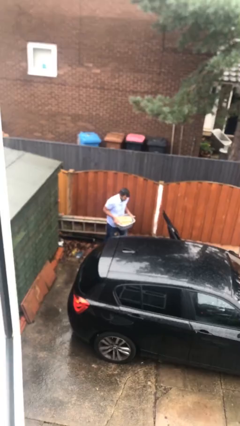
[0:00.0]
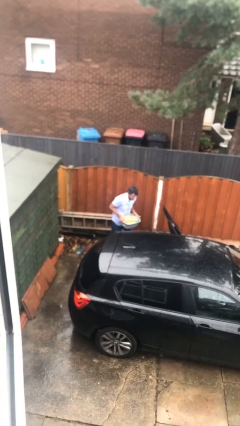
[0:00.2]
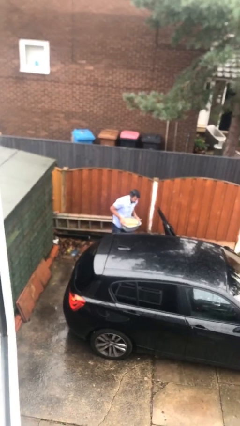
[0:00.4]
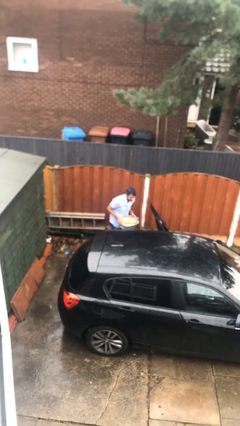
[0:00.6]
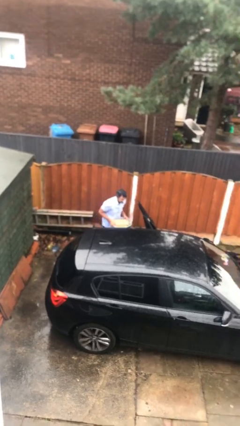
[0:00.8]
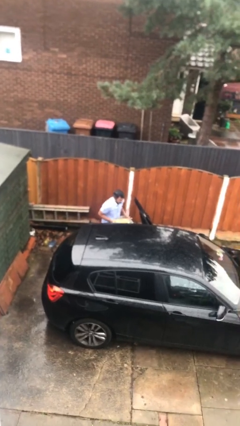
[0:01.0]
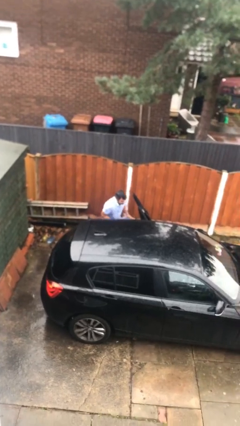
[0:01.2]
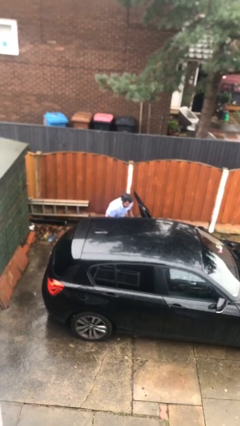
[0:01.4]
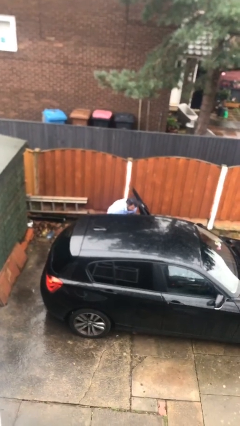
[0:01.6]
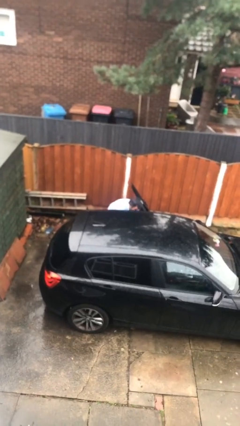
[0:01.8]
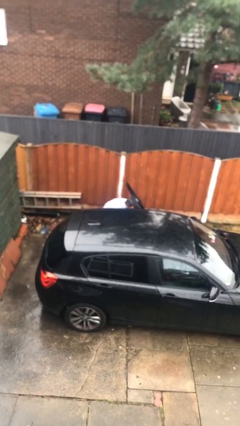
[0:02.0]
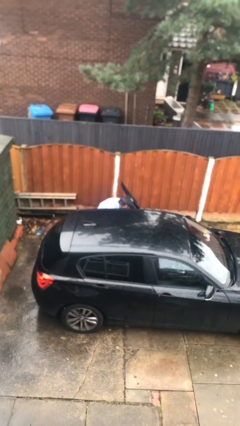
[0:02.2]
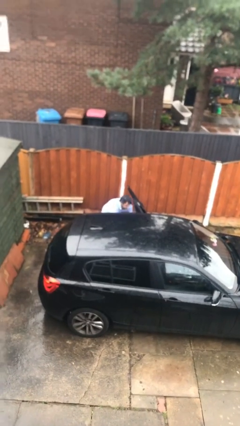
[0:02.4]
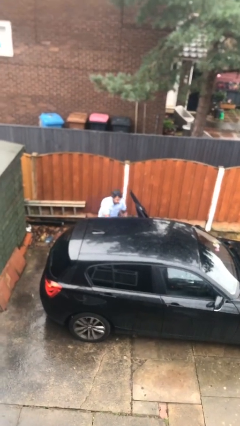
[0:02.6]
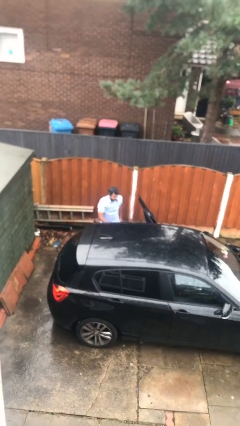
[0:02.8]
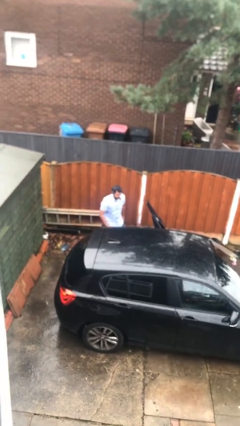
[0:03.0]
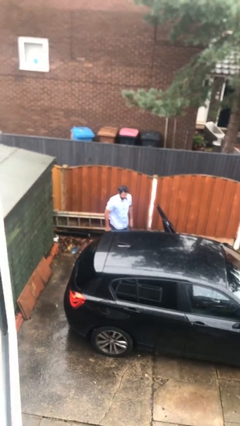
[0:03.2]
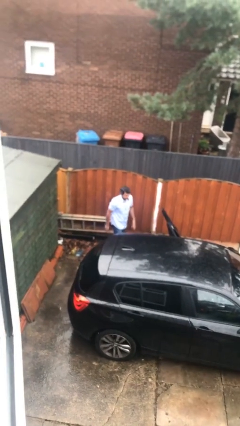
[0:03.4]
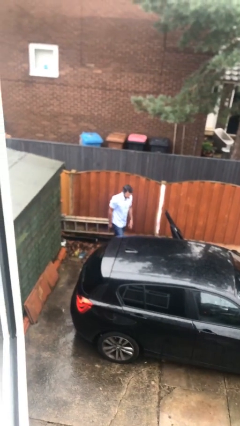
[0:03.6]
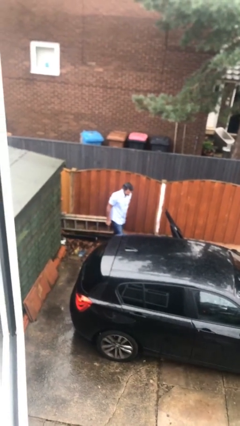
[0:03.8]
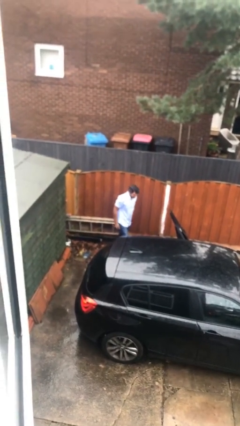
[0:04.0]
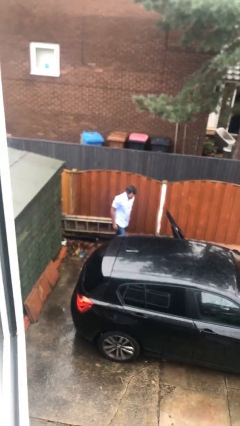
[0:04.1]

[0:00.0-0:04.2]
person loads car

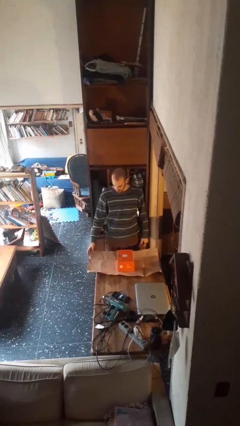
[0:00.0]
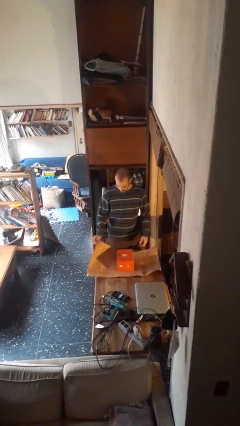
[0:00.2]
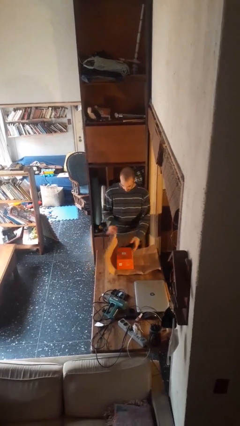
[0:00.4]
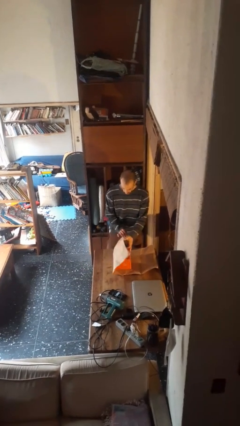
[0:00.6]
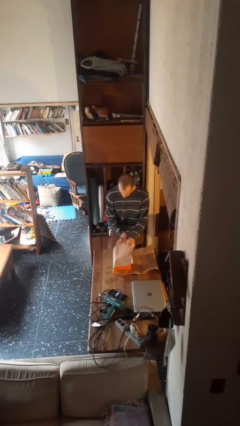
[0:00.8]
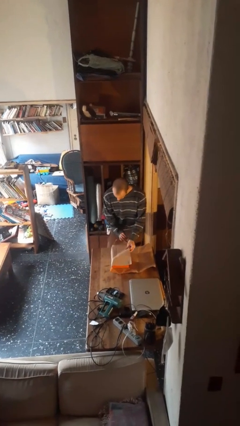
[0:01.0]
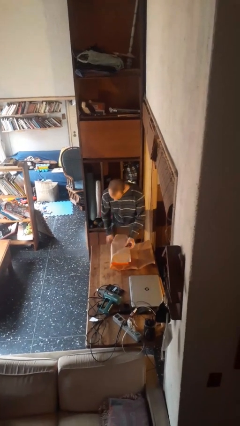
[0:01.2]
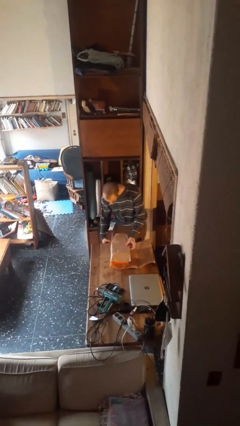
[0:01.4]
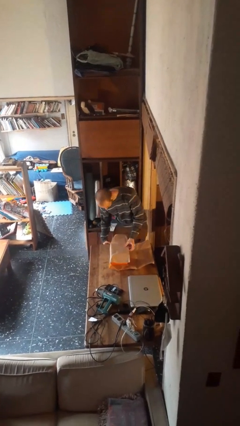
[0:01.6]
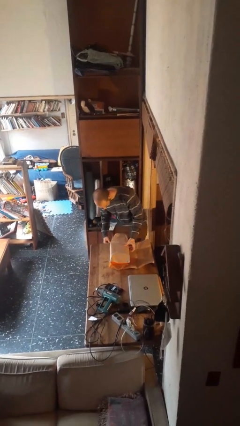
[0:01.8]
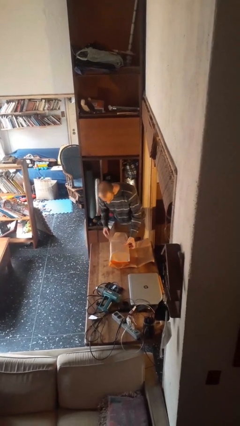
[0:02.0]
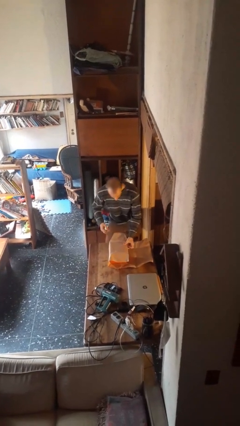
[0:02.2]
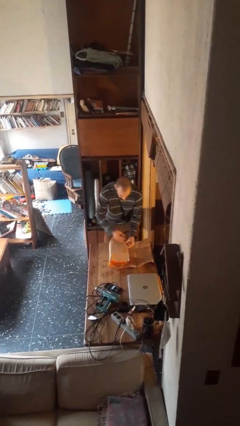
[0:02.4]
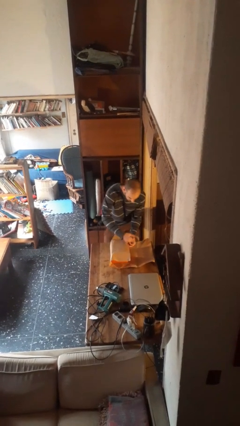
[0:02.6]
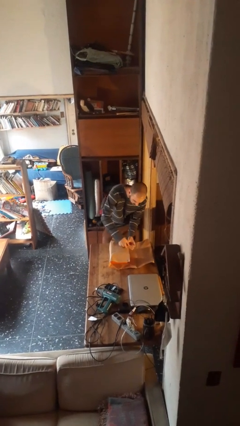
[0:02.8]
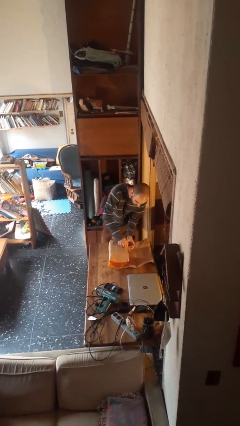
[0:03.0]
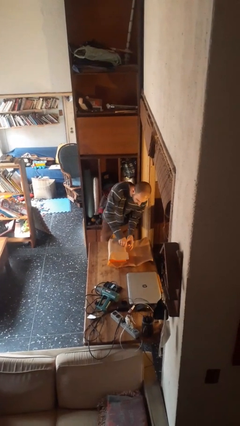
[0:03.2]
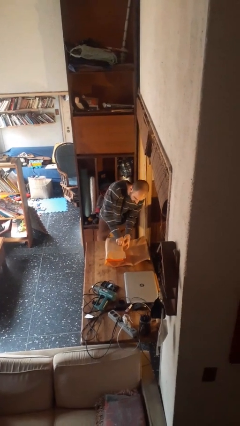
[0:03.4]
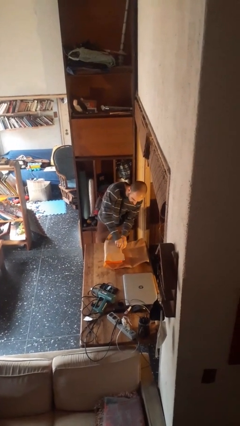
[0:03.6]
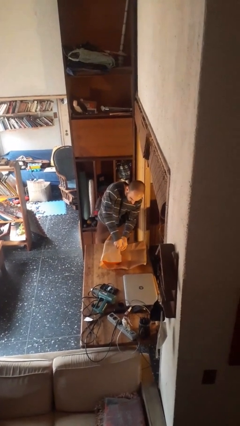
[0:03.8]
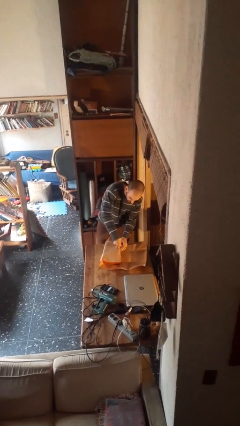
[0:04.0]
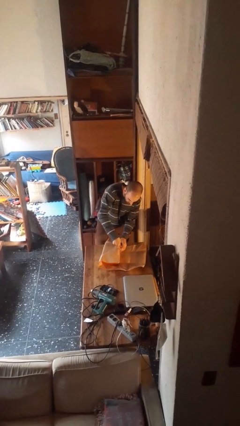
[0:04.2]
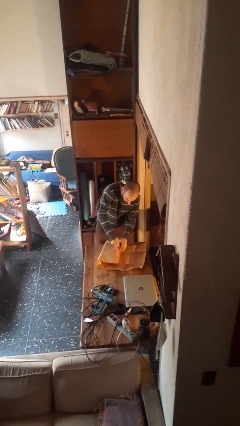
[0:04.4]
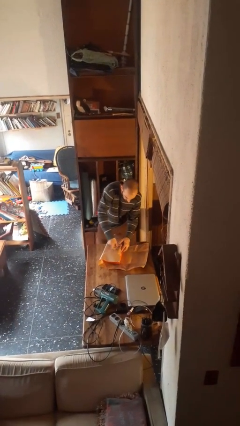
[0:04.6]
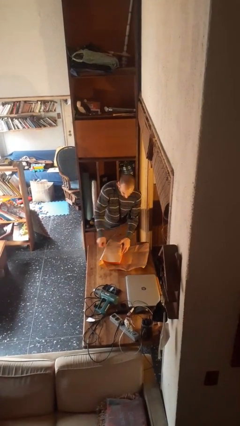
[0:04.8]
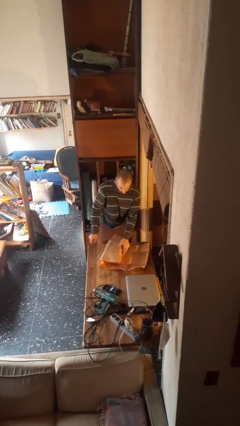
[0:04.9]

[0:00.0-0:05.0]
person wraps box

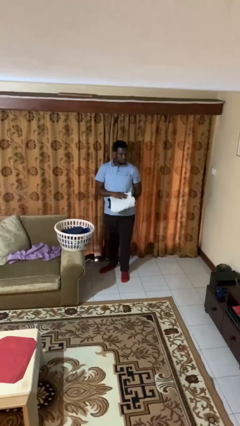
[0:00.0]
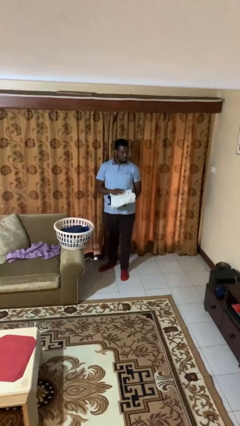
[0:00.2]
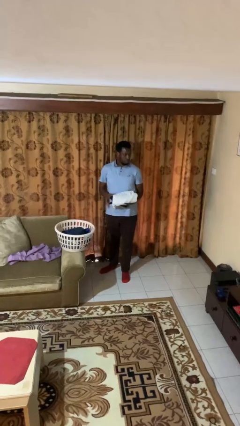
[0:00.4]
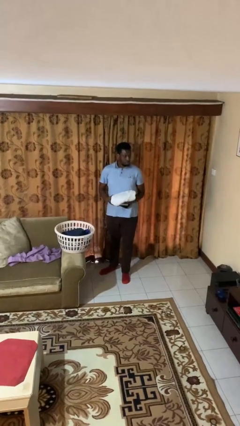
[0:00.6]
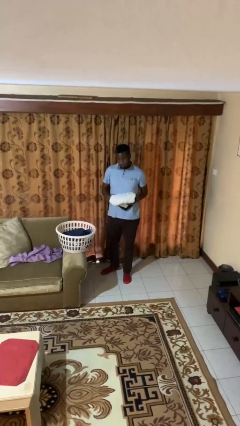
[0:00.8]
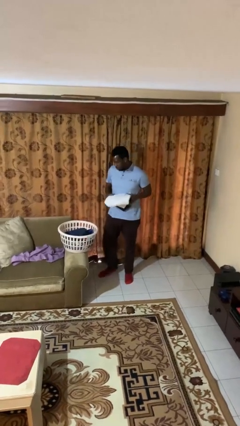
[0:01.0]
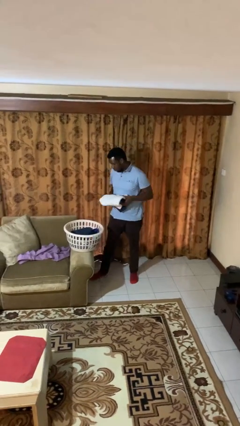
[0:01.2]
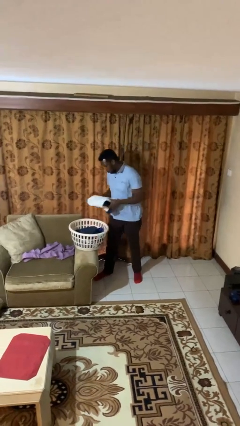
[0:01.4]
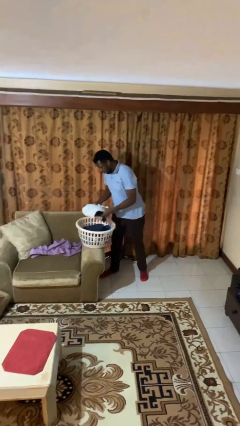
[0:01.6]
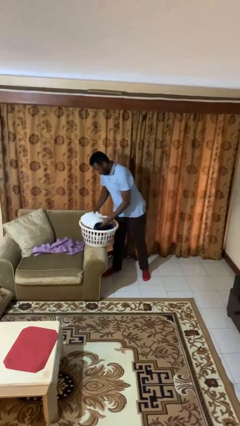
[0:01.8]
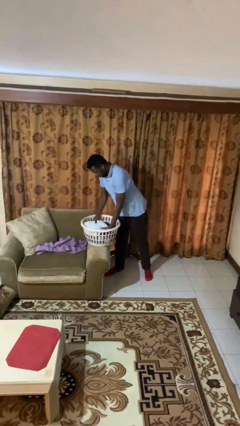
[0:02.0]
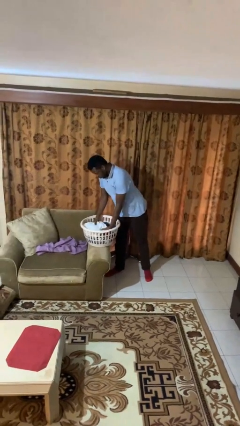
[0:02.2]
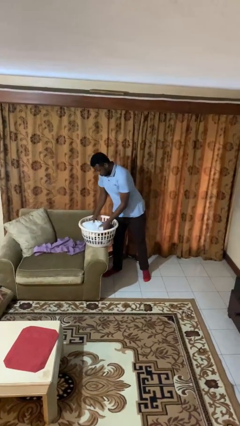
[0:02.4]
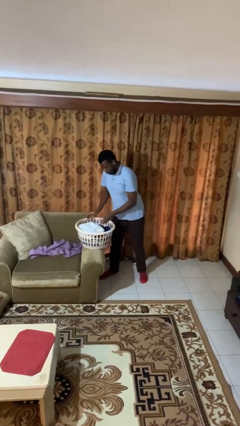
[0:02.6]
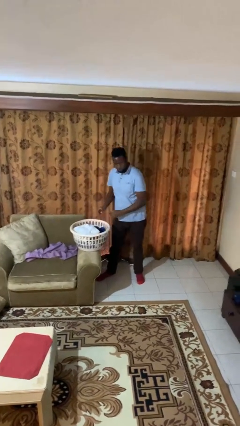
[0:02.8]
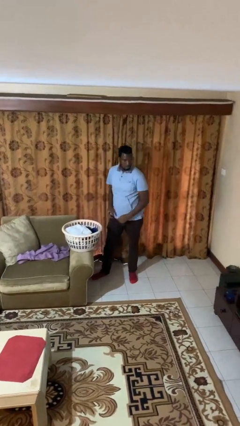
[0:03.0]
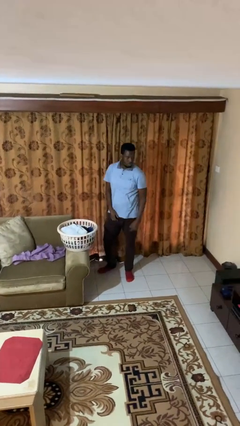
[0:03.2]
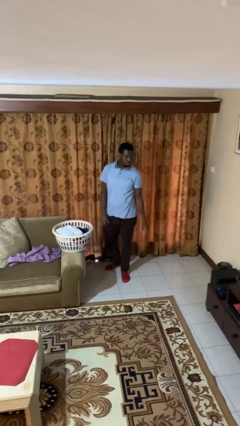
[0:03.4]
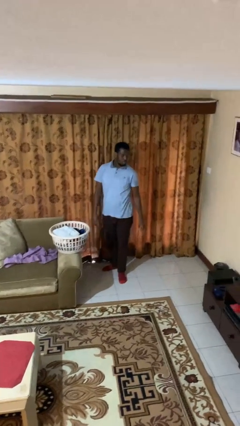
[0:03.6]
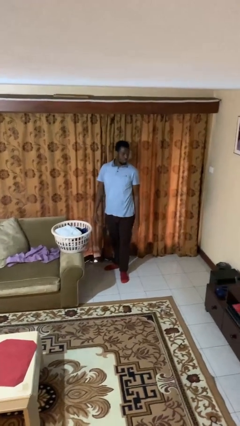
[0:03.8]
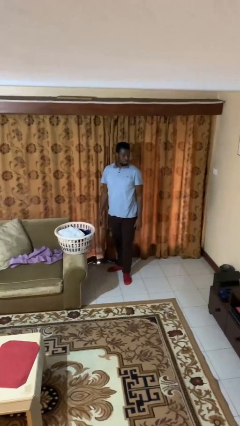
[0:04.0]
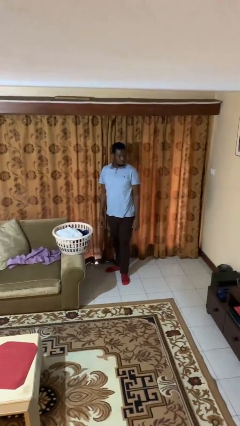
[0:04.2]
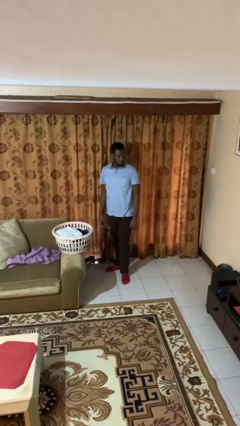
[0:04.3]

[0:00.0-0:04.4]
person puts object into basket

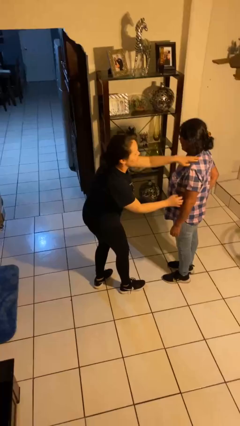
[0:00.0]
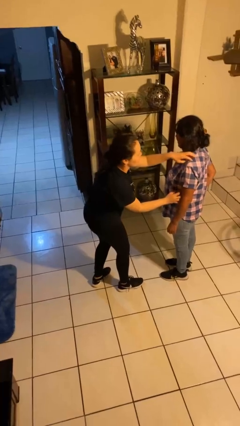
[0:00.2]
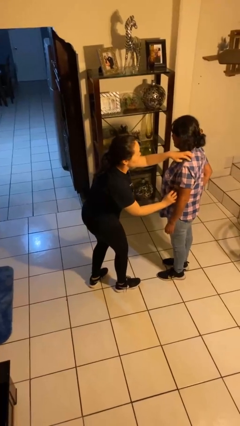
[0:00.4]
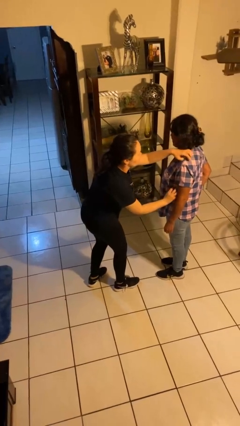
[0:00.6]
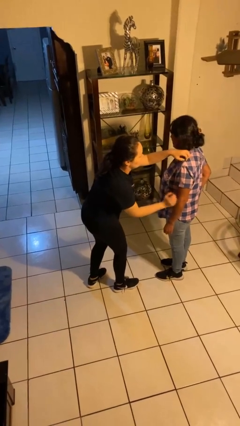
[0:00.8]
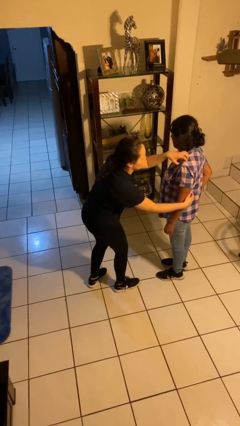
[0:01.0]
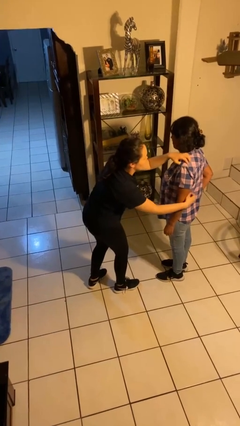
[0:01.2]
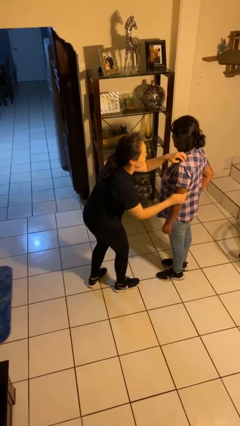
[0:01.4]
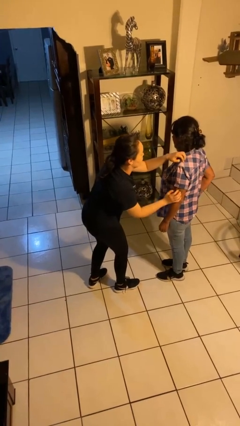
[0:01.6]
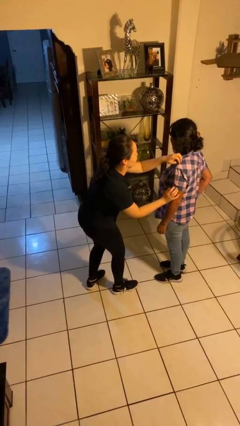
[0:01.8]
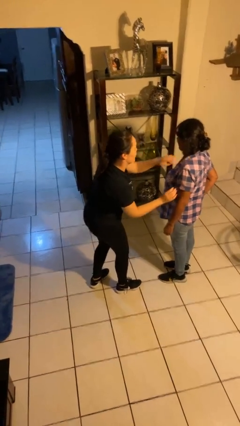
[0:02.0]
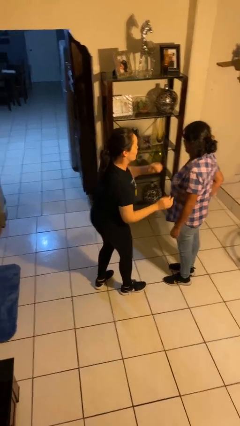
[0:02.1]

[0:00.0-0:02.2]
person tickles person

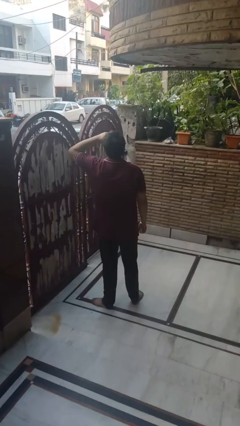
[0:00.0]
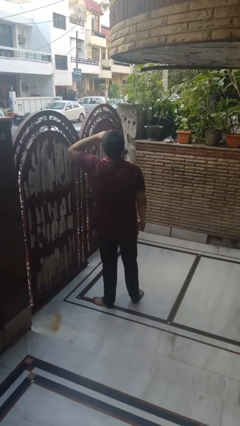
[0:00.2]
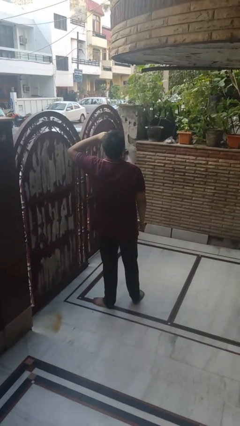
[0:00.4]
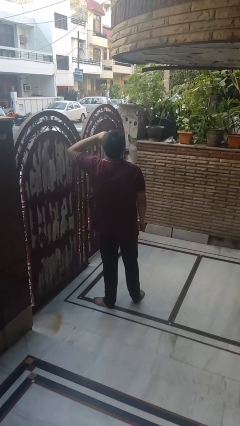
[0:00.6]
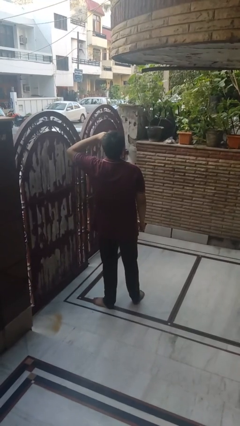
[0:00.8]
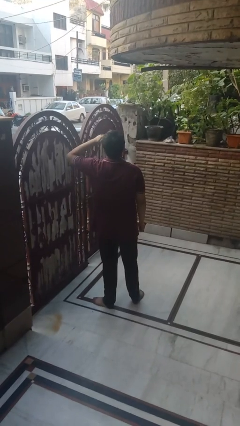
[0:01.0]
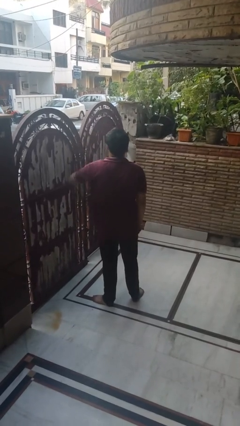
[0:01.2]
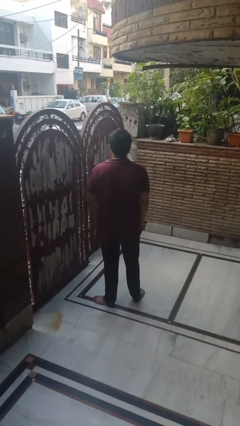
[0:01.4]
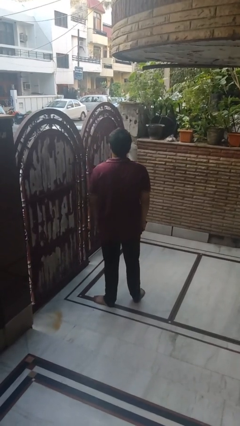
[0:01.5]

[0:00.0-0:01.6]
person shades eyes

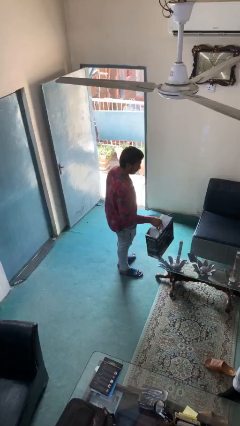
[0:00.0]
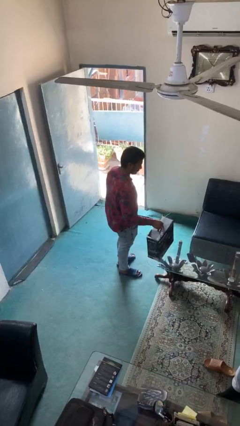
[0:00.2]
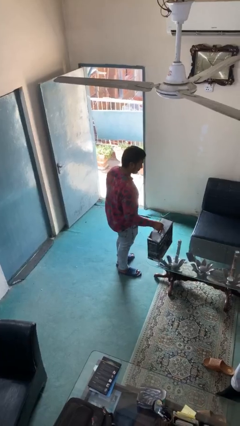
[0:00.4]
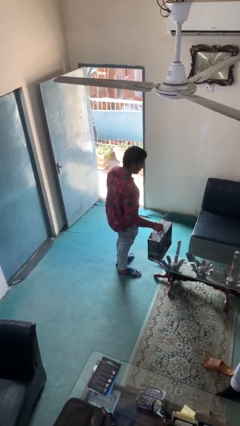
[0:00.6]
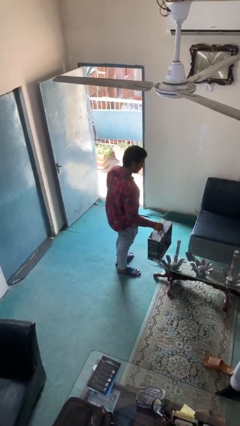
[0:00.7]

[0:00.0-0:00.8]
person puts down object on table
